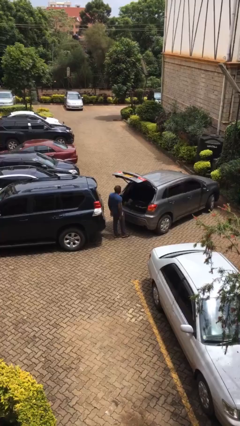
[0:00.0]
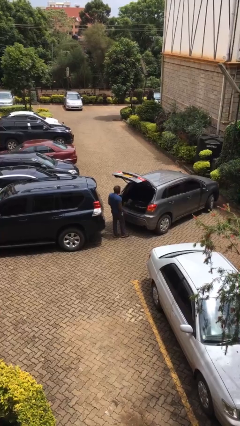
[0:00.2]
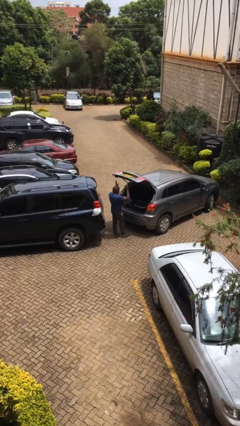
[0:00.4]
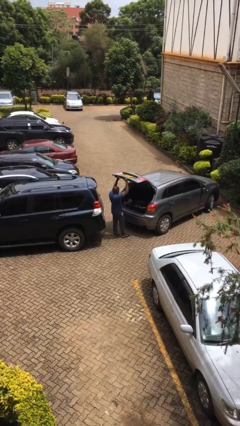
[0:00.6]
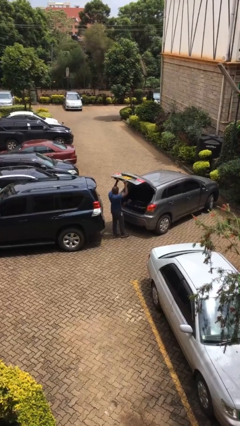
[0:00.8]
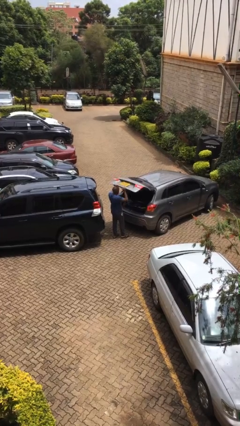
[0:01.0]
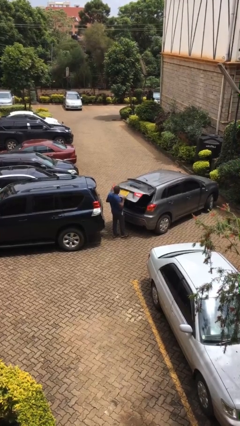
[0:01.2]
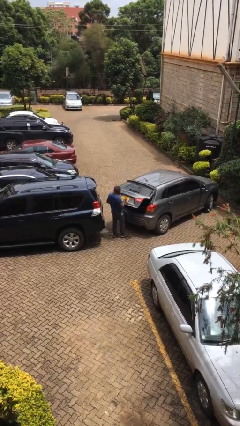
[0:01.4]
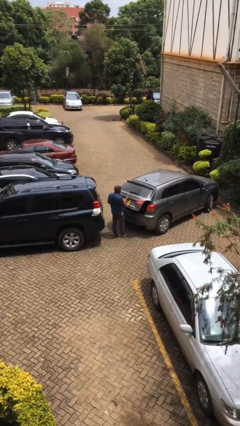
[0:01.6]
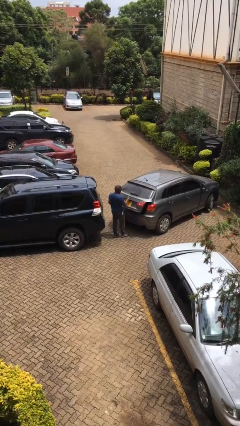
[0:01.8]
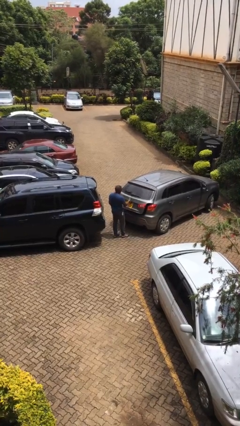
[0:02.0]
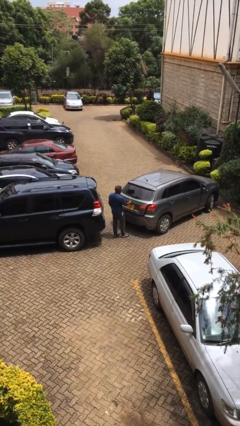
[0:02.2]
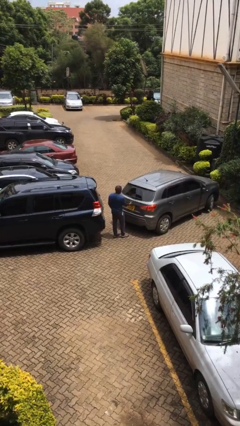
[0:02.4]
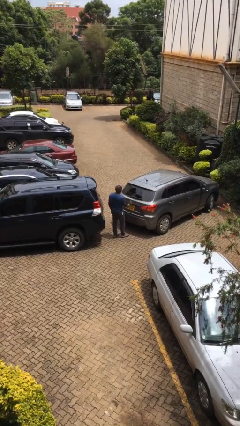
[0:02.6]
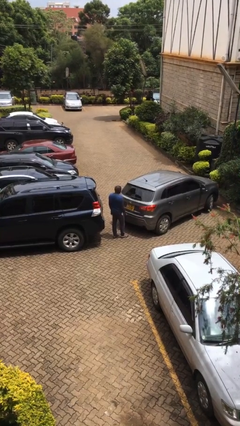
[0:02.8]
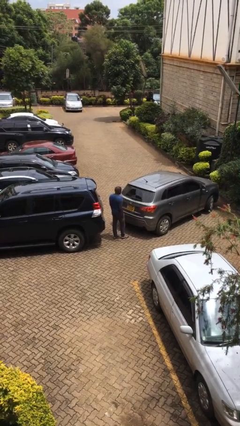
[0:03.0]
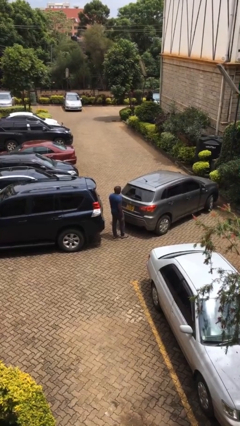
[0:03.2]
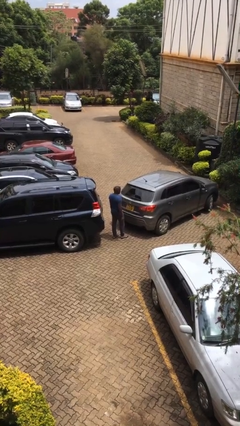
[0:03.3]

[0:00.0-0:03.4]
person closes car trunk

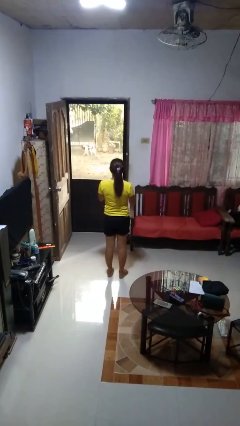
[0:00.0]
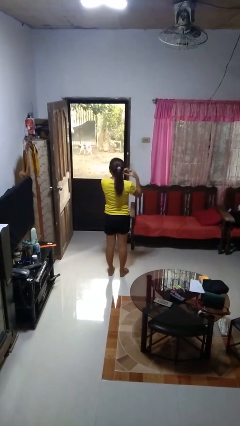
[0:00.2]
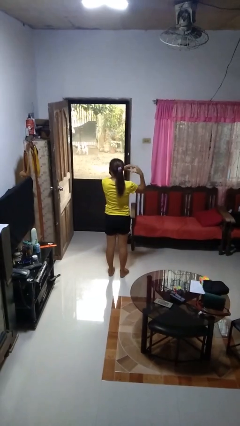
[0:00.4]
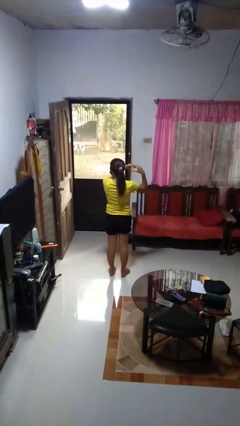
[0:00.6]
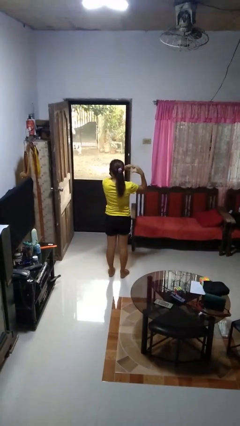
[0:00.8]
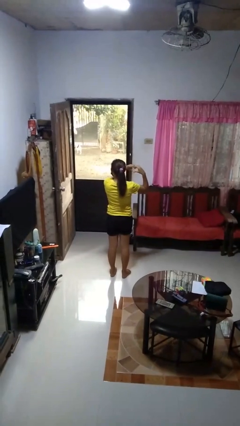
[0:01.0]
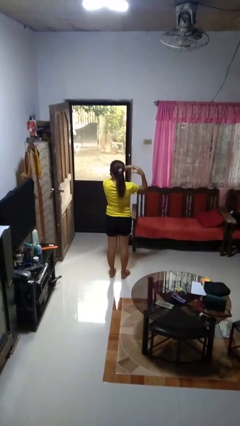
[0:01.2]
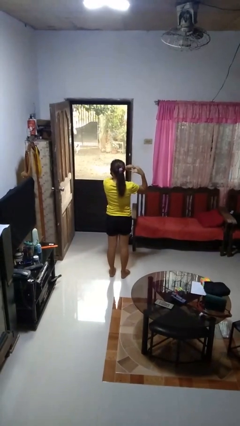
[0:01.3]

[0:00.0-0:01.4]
person gestures heart

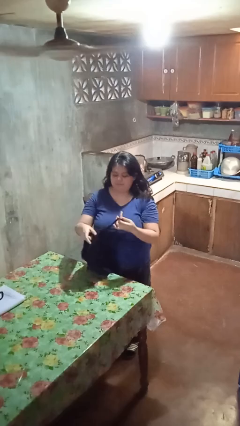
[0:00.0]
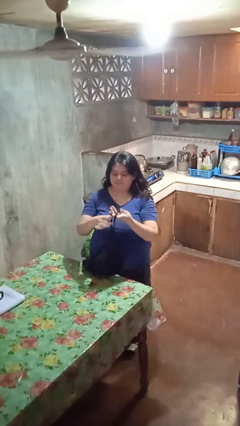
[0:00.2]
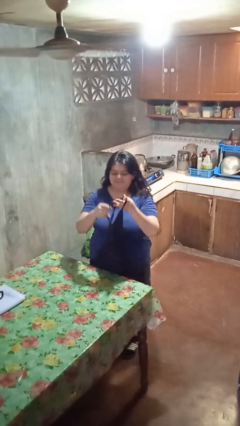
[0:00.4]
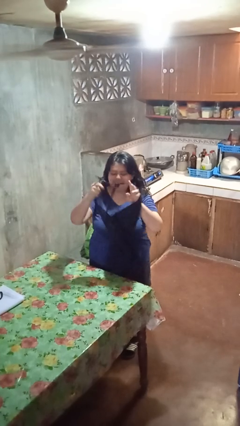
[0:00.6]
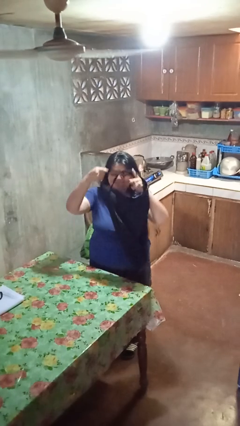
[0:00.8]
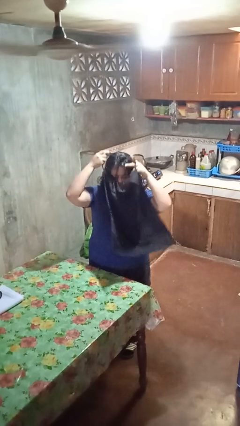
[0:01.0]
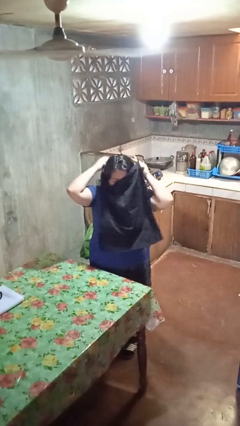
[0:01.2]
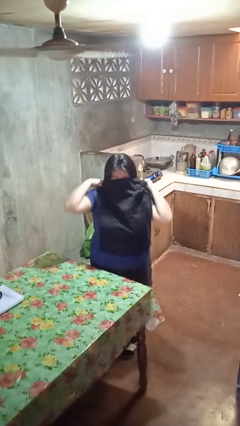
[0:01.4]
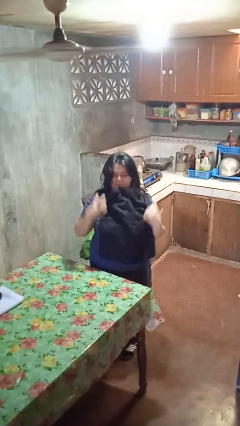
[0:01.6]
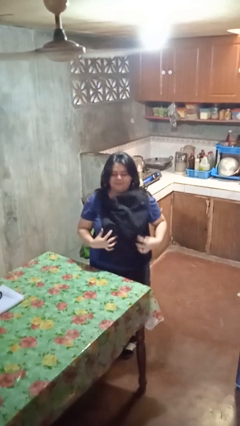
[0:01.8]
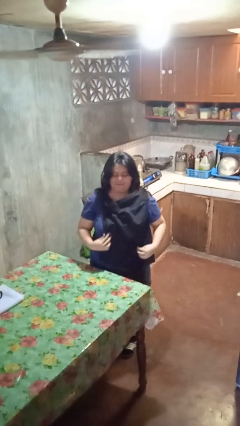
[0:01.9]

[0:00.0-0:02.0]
person puts on apron

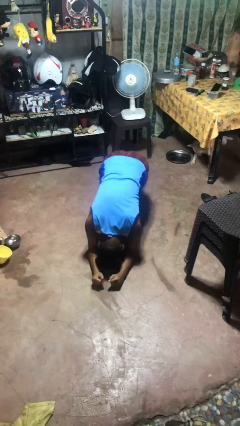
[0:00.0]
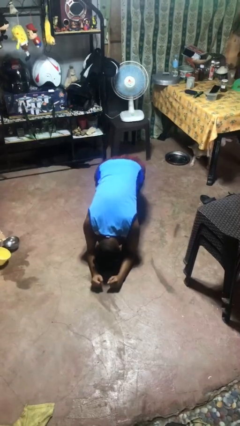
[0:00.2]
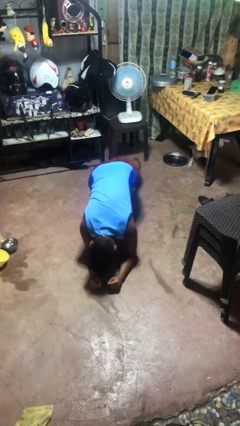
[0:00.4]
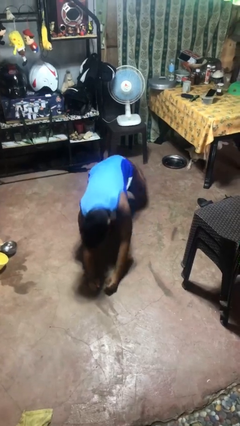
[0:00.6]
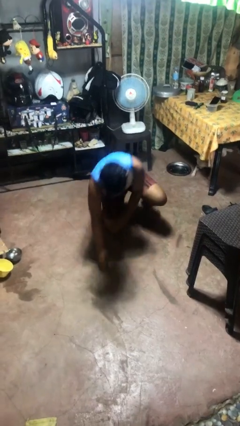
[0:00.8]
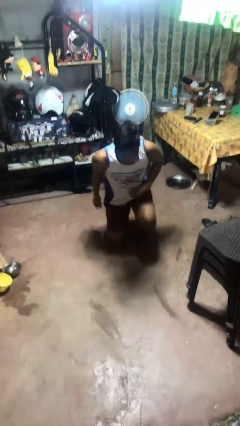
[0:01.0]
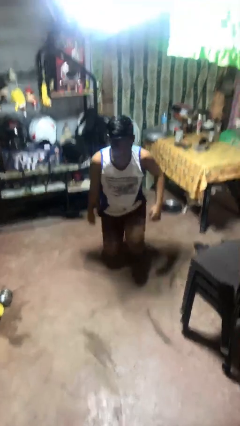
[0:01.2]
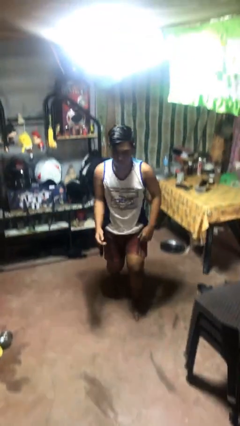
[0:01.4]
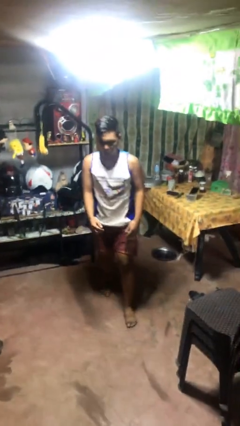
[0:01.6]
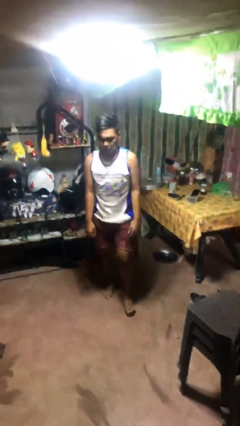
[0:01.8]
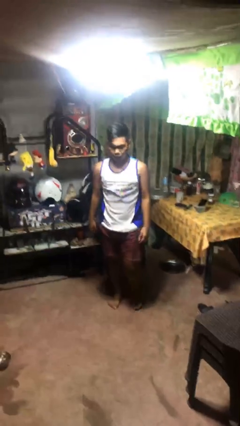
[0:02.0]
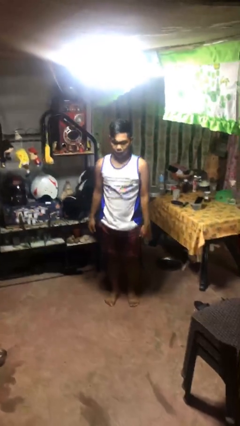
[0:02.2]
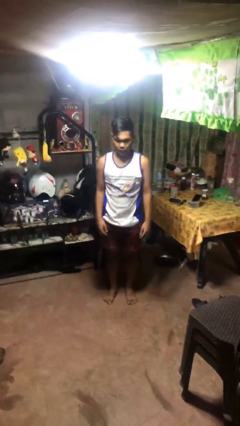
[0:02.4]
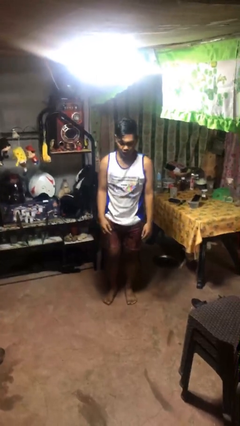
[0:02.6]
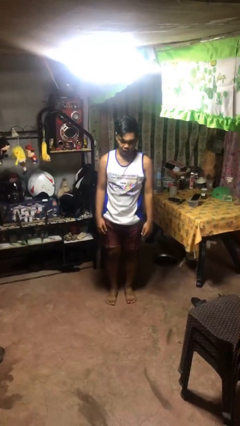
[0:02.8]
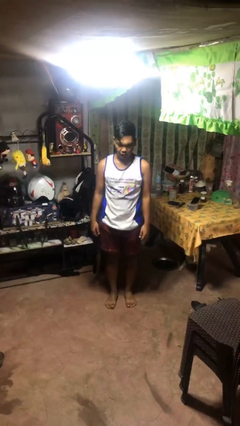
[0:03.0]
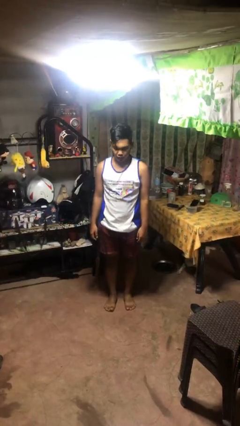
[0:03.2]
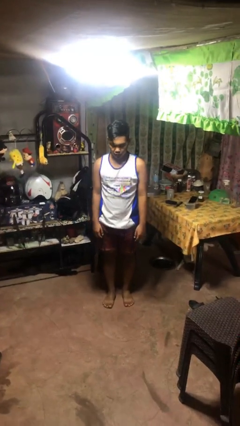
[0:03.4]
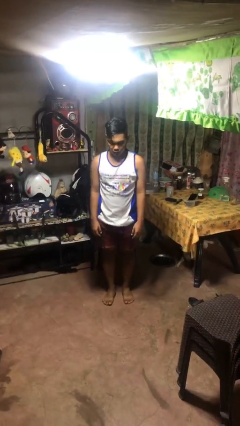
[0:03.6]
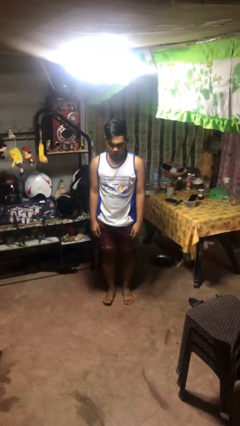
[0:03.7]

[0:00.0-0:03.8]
person stands up from floor

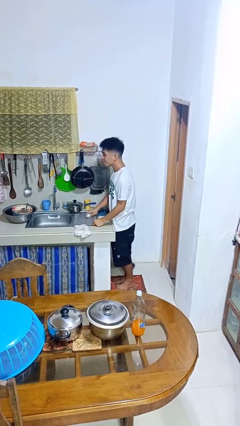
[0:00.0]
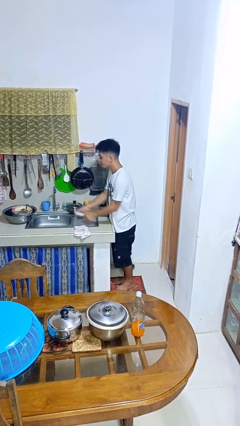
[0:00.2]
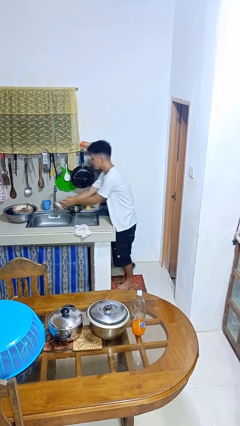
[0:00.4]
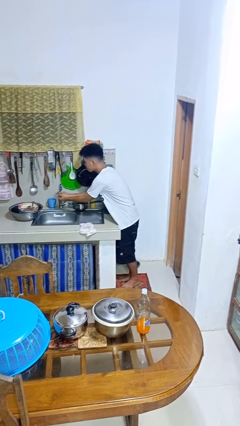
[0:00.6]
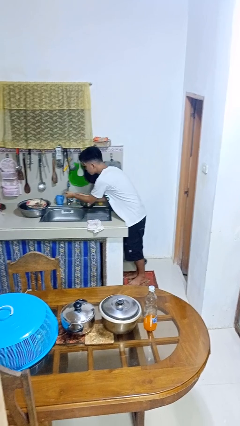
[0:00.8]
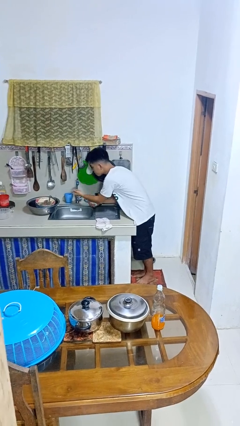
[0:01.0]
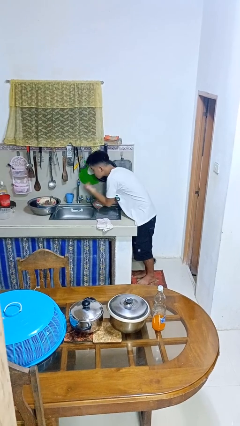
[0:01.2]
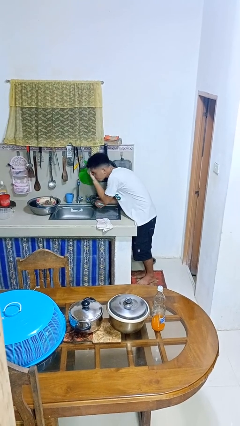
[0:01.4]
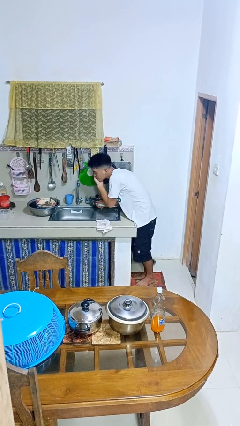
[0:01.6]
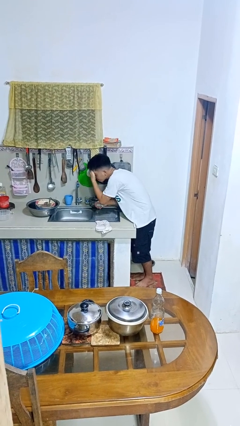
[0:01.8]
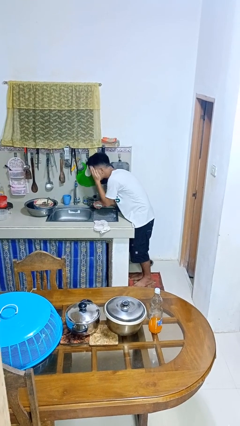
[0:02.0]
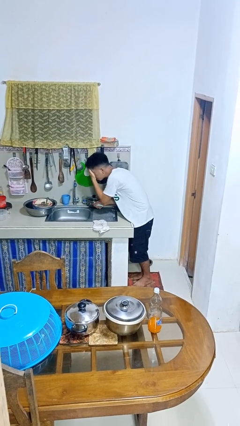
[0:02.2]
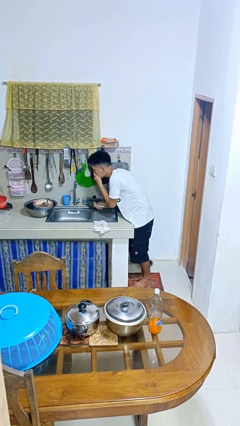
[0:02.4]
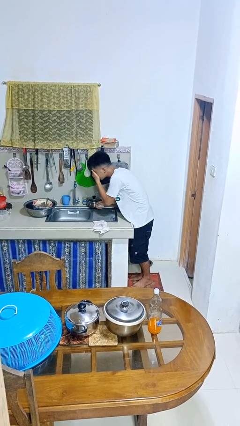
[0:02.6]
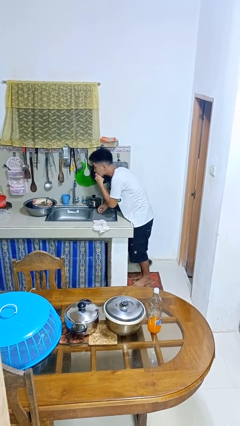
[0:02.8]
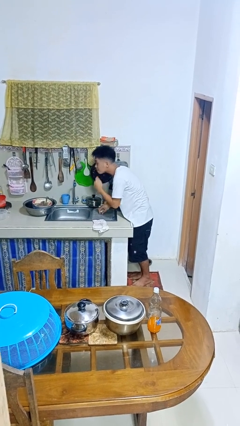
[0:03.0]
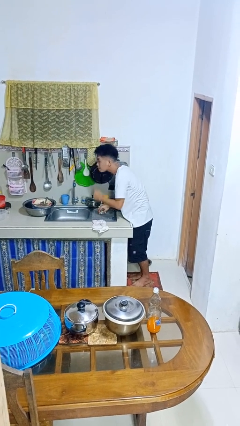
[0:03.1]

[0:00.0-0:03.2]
person washes face

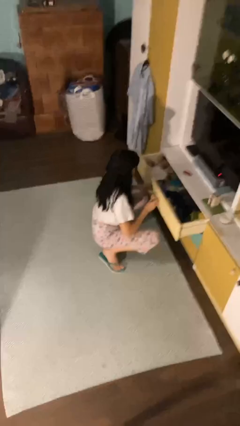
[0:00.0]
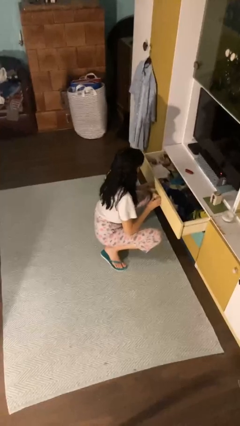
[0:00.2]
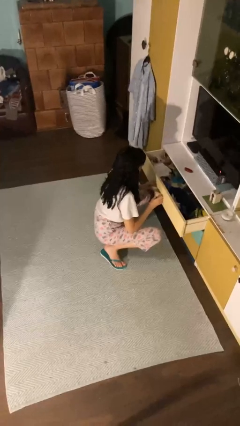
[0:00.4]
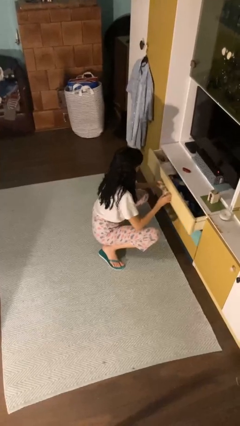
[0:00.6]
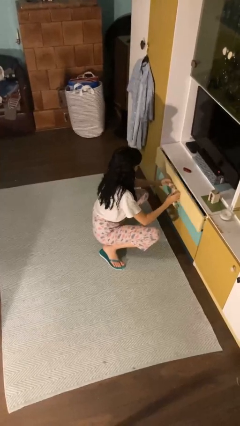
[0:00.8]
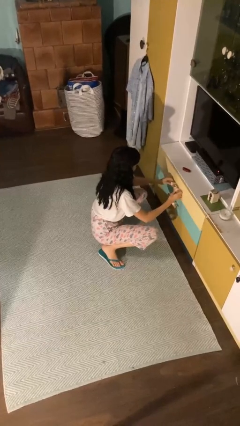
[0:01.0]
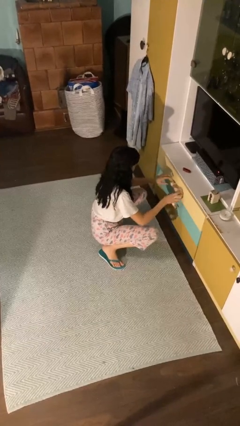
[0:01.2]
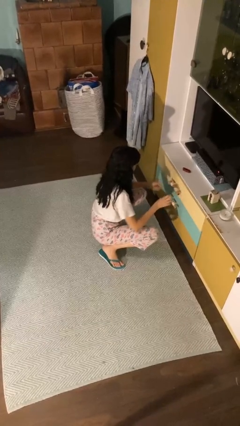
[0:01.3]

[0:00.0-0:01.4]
person closes dresser drawer

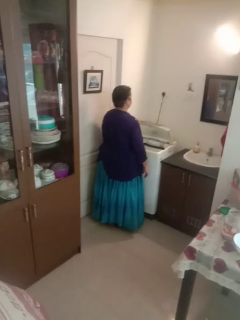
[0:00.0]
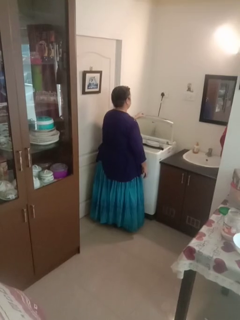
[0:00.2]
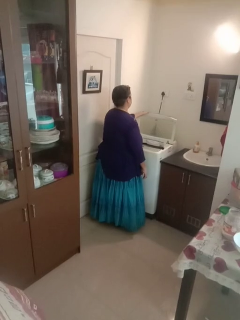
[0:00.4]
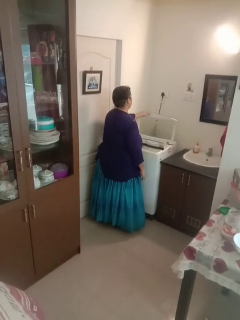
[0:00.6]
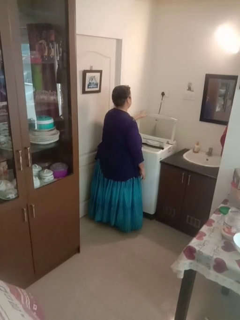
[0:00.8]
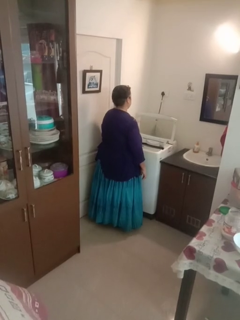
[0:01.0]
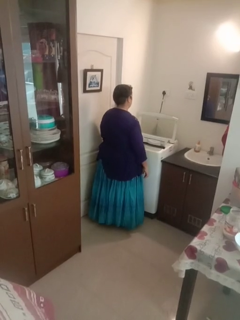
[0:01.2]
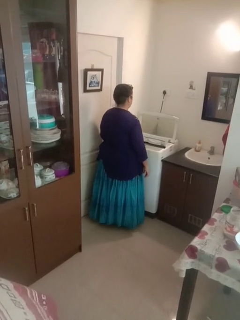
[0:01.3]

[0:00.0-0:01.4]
person opens clothes washer

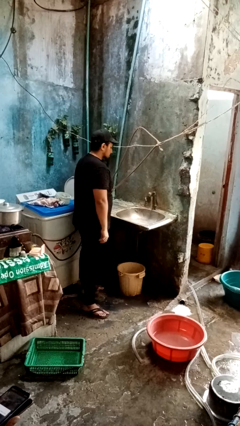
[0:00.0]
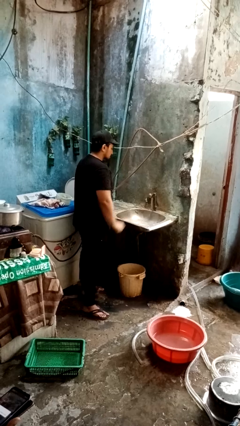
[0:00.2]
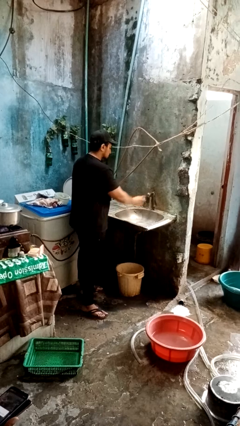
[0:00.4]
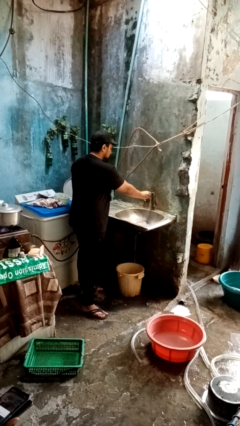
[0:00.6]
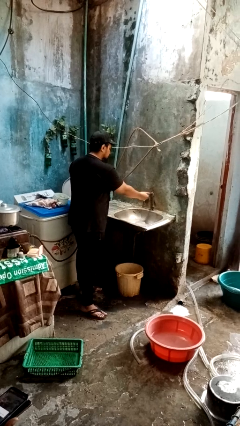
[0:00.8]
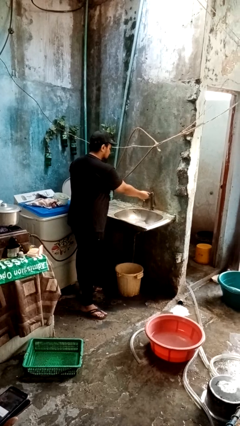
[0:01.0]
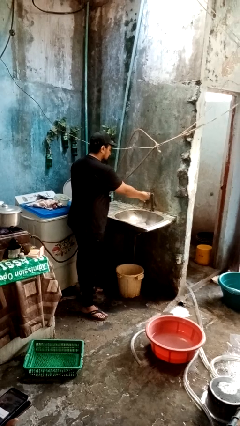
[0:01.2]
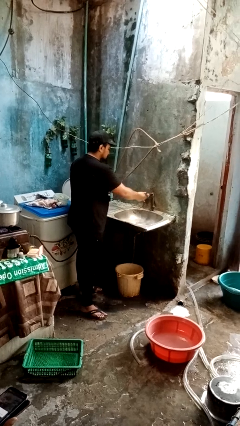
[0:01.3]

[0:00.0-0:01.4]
person turns off faucet
